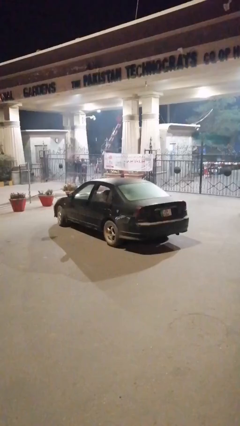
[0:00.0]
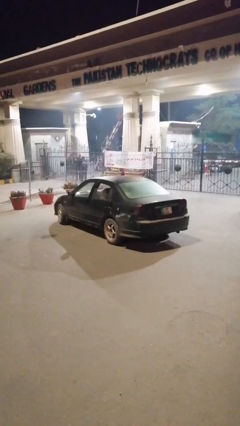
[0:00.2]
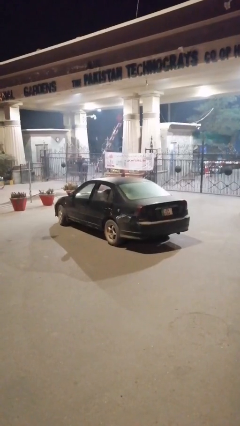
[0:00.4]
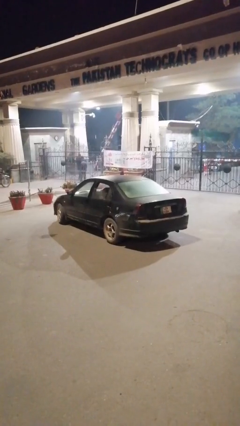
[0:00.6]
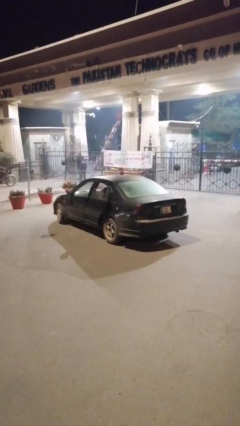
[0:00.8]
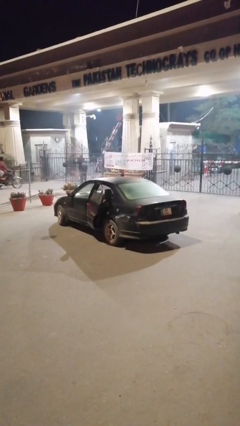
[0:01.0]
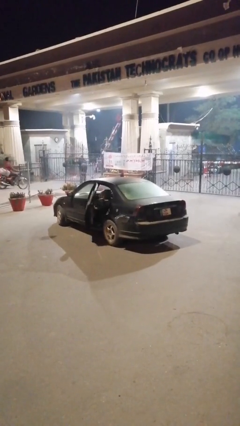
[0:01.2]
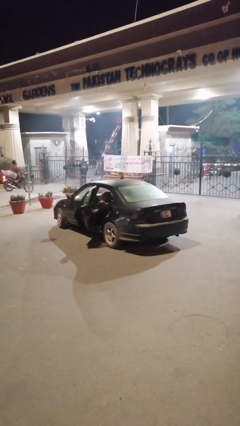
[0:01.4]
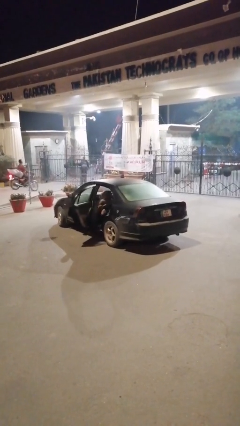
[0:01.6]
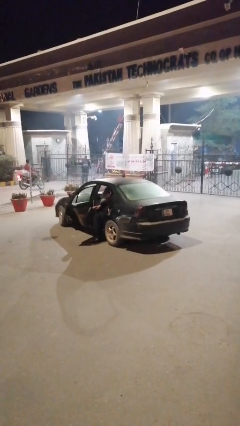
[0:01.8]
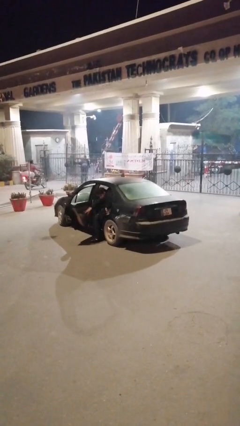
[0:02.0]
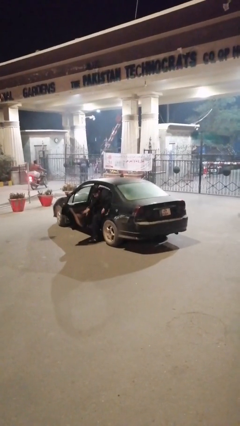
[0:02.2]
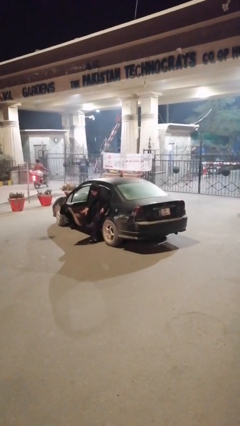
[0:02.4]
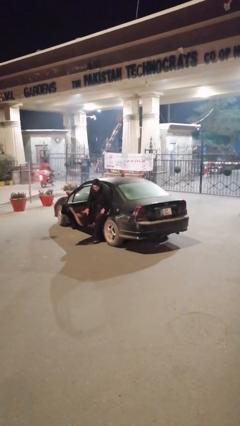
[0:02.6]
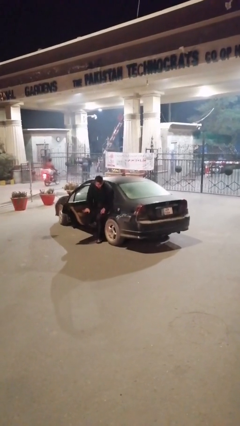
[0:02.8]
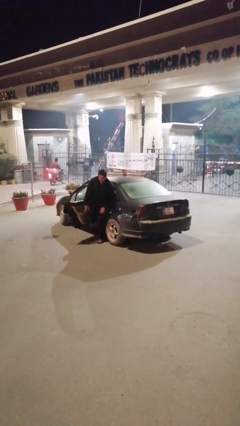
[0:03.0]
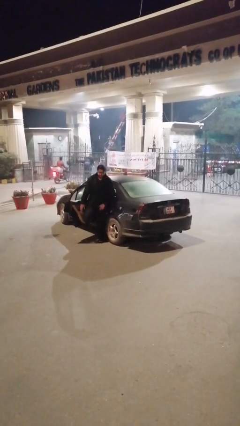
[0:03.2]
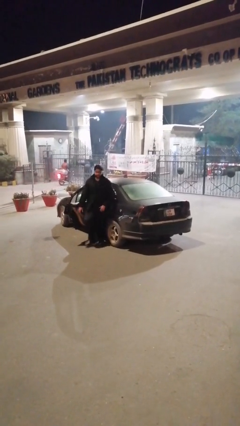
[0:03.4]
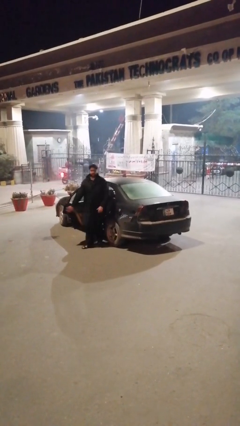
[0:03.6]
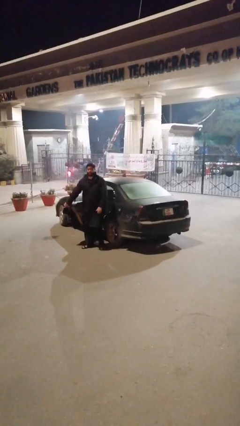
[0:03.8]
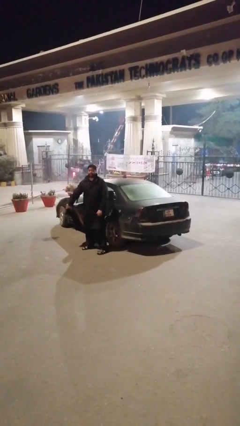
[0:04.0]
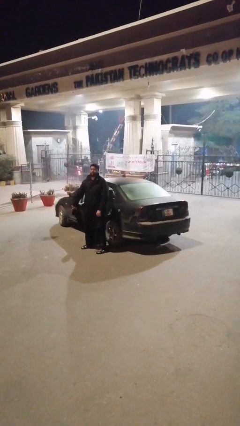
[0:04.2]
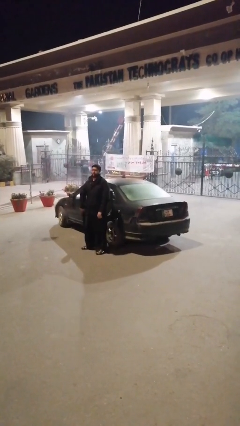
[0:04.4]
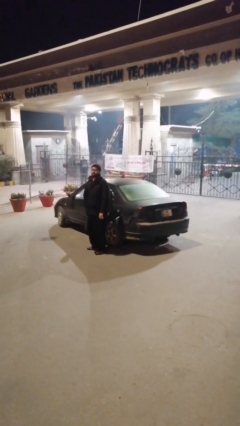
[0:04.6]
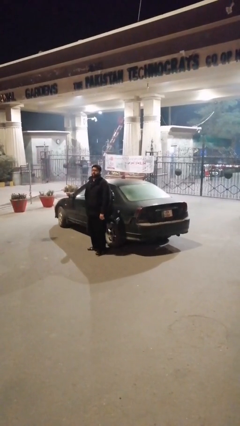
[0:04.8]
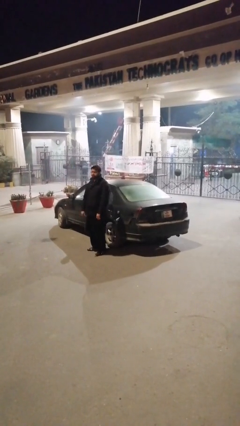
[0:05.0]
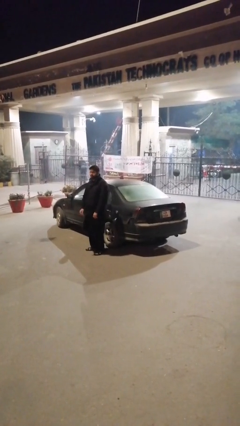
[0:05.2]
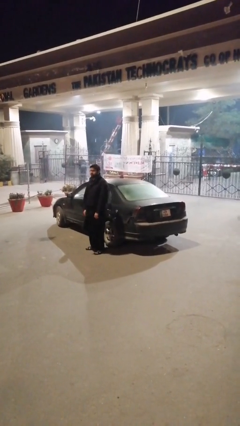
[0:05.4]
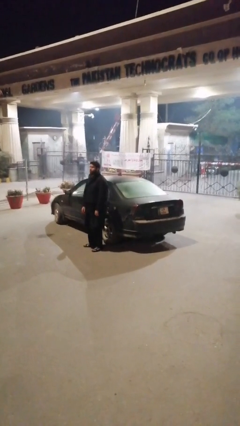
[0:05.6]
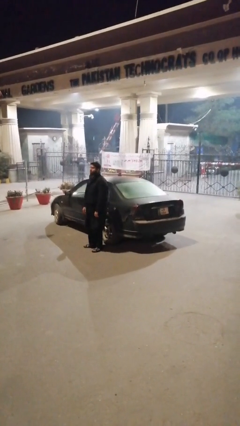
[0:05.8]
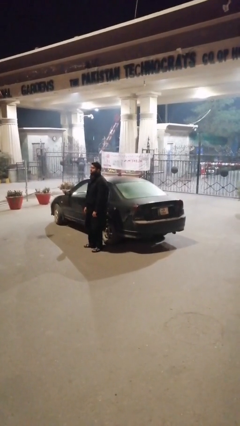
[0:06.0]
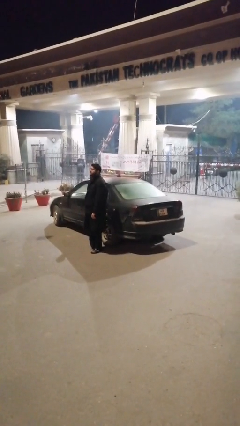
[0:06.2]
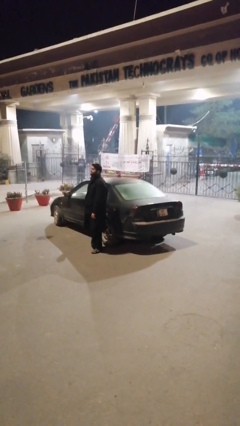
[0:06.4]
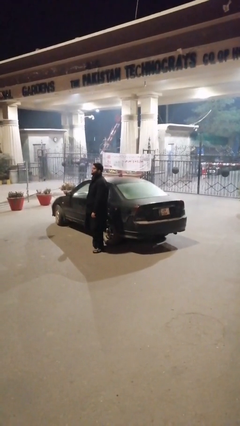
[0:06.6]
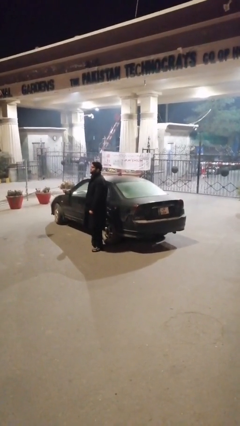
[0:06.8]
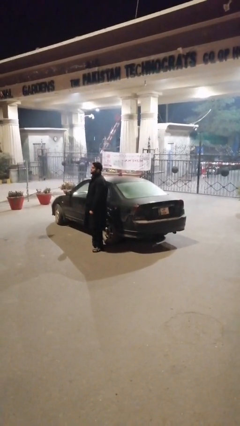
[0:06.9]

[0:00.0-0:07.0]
car drops off person

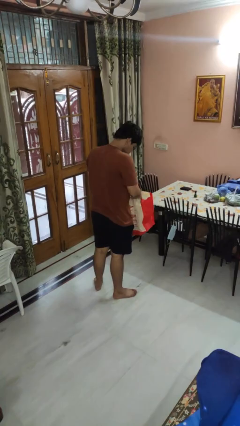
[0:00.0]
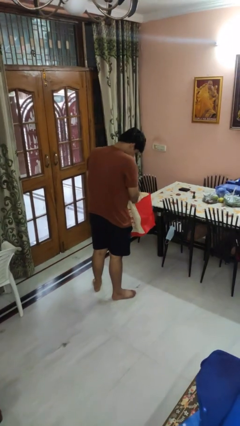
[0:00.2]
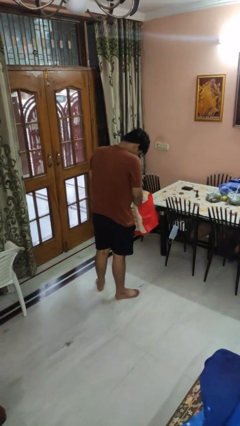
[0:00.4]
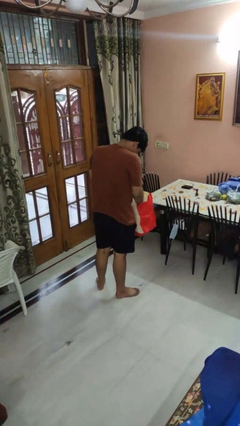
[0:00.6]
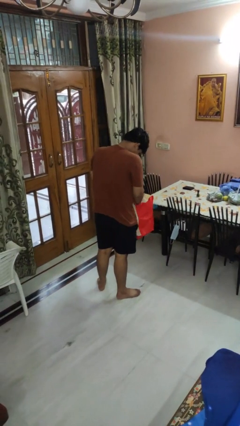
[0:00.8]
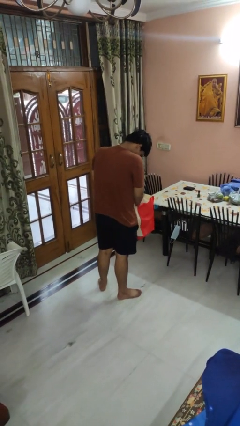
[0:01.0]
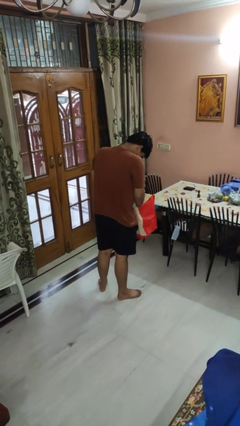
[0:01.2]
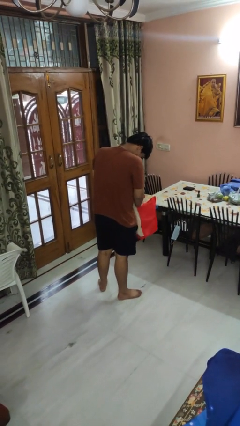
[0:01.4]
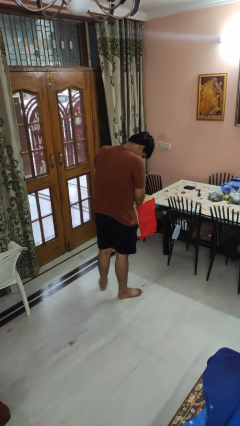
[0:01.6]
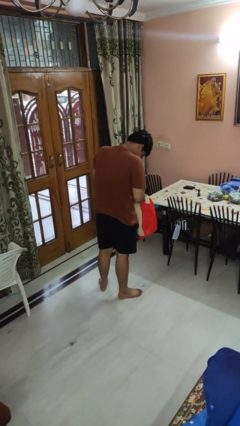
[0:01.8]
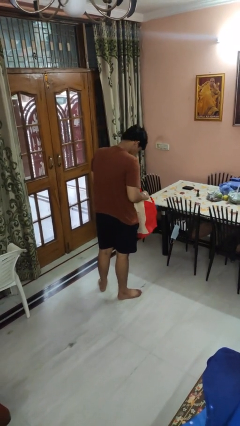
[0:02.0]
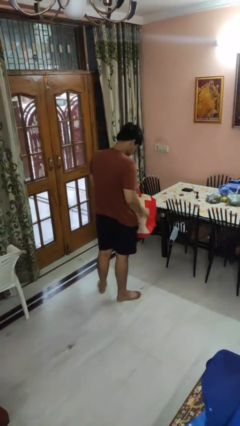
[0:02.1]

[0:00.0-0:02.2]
person searches in bag

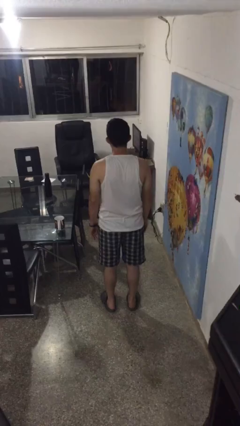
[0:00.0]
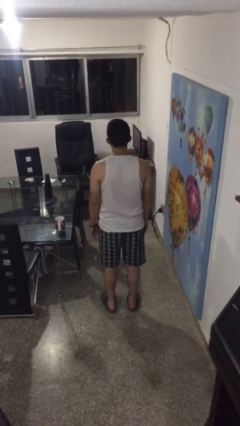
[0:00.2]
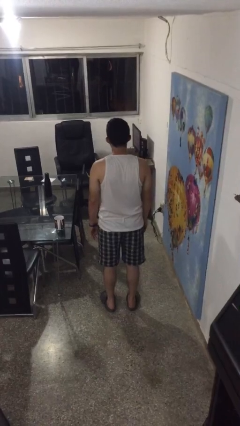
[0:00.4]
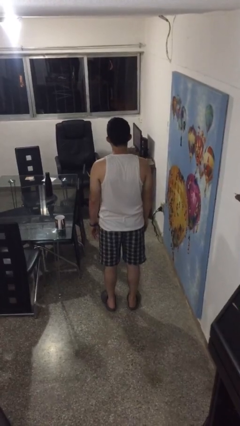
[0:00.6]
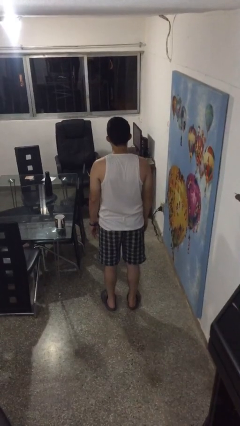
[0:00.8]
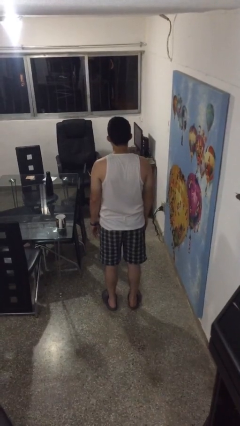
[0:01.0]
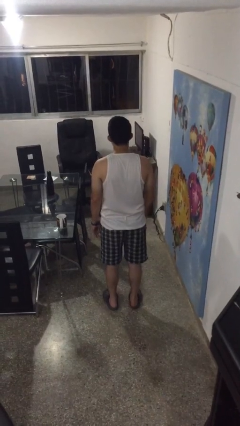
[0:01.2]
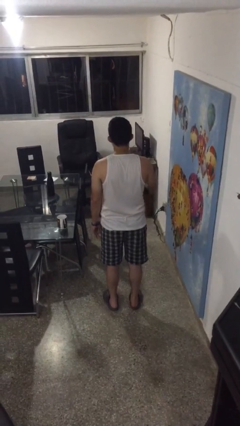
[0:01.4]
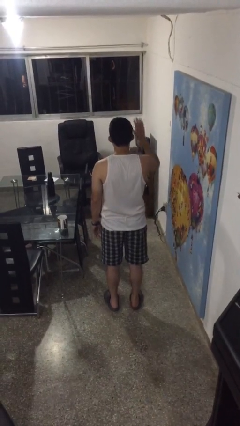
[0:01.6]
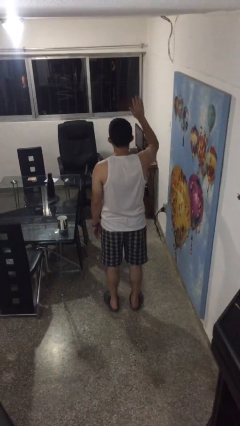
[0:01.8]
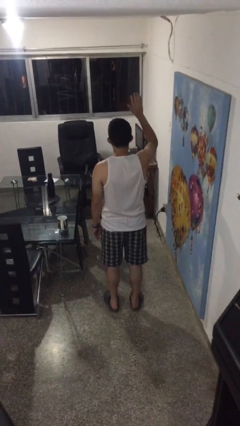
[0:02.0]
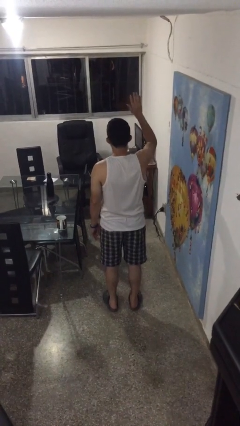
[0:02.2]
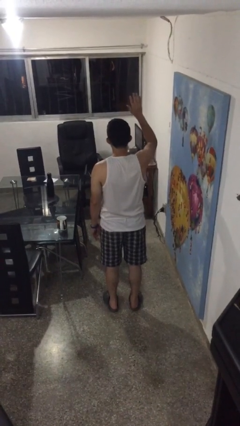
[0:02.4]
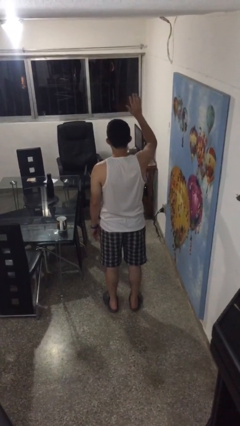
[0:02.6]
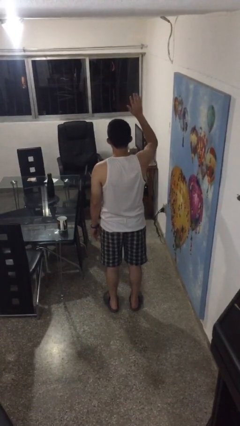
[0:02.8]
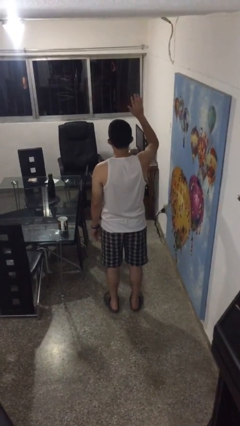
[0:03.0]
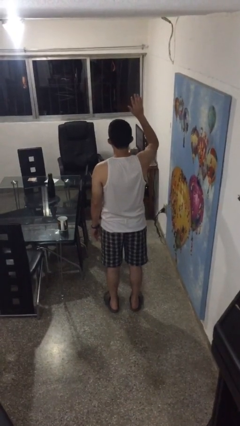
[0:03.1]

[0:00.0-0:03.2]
person gestures raise hand

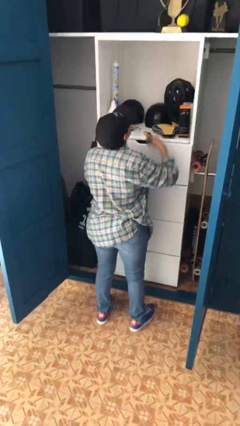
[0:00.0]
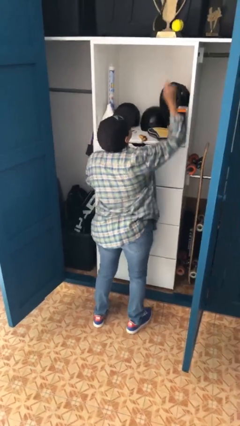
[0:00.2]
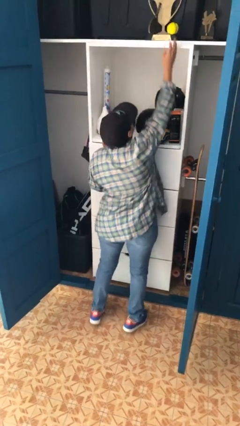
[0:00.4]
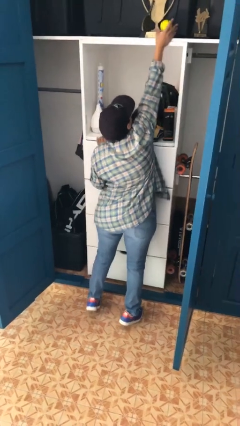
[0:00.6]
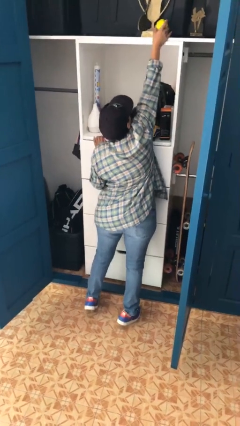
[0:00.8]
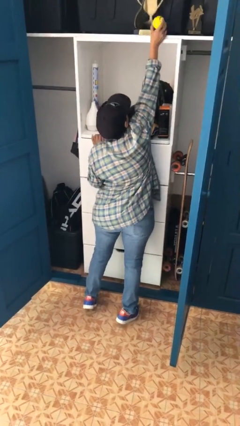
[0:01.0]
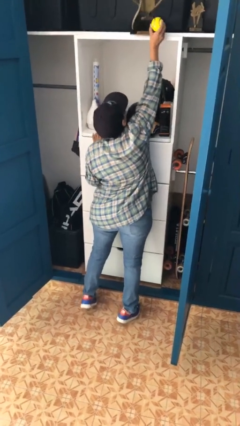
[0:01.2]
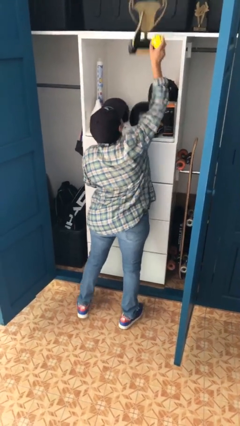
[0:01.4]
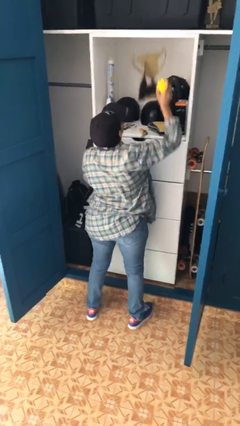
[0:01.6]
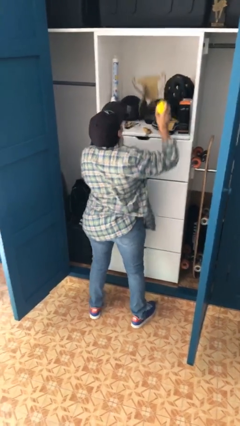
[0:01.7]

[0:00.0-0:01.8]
person picks up object from shelf

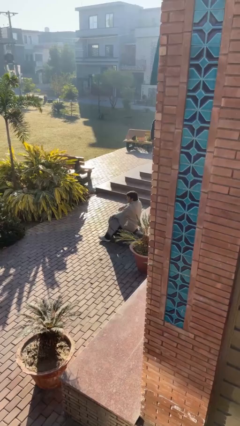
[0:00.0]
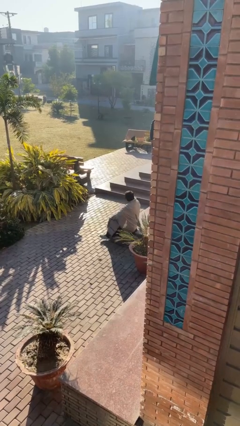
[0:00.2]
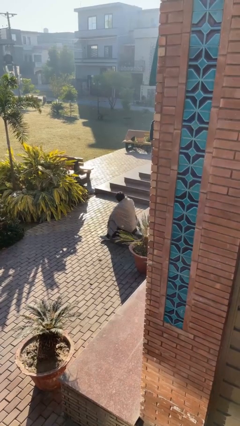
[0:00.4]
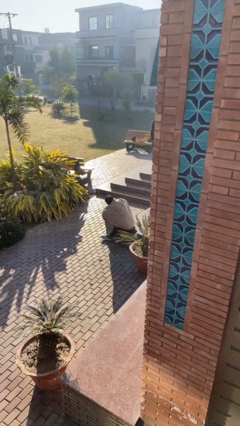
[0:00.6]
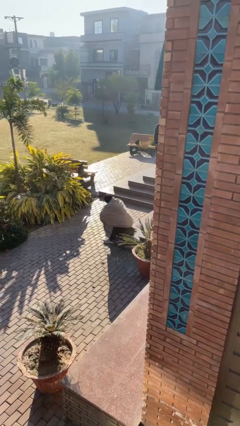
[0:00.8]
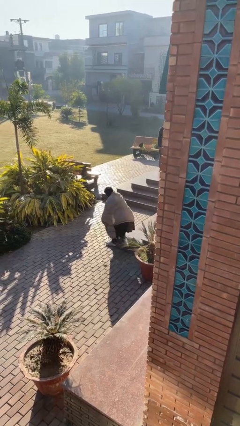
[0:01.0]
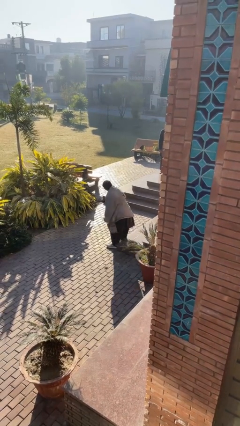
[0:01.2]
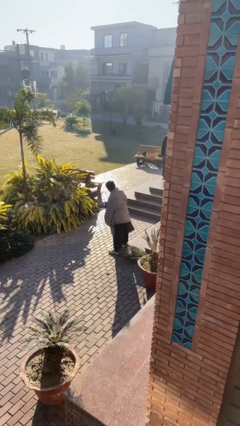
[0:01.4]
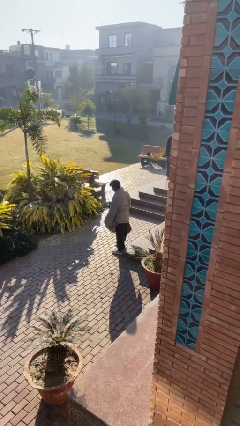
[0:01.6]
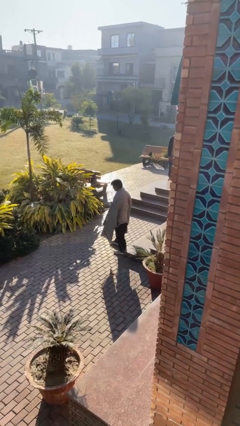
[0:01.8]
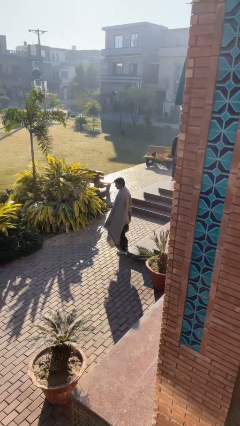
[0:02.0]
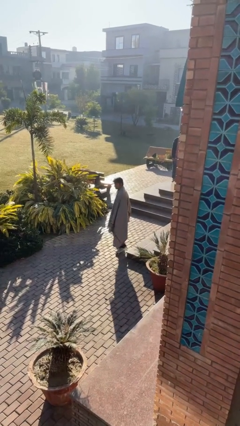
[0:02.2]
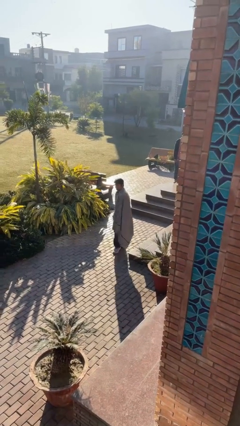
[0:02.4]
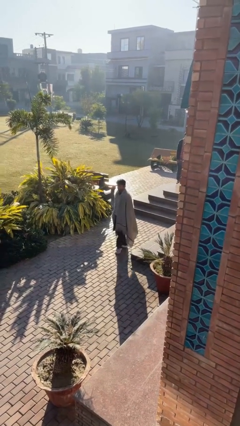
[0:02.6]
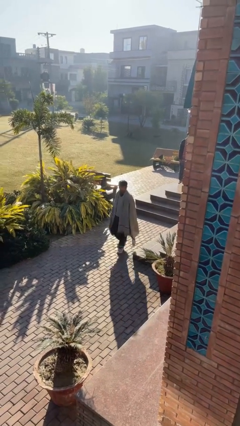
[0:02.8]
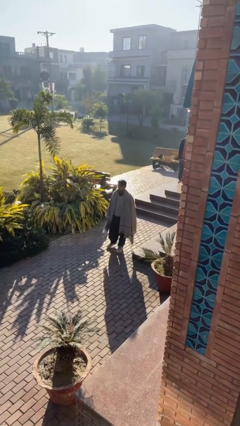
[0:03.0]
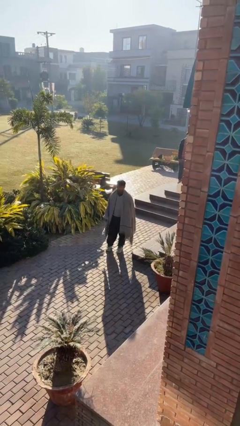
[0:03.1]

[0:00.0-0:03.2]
person stands up

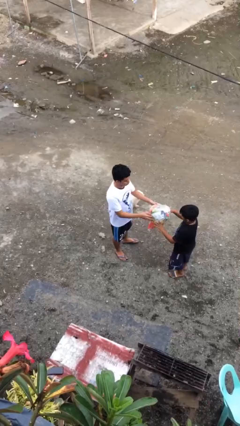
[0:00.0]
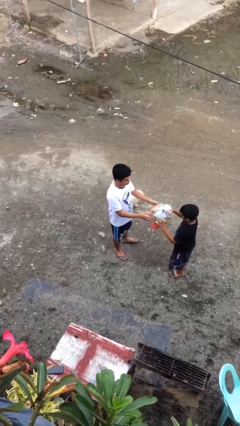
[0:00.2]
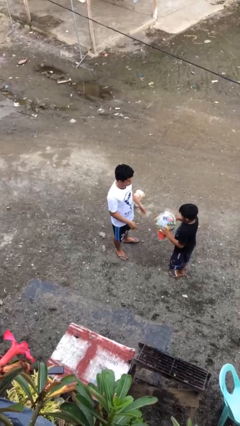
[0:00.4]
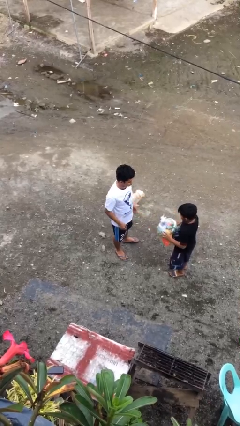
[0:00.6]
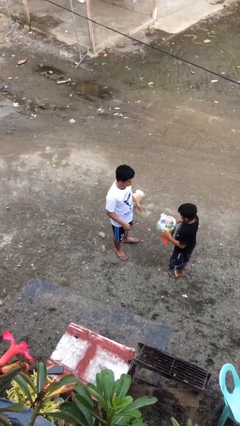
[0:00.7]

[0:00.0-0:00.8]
person transfers object to person
